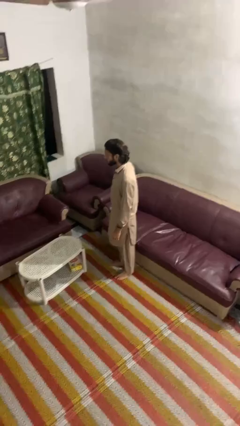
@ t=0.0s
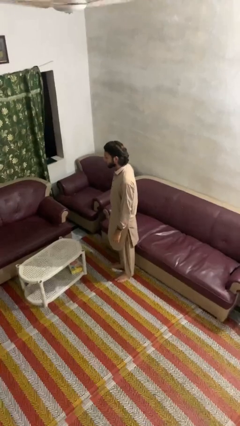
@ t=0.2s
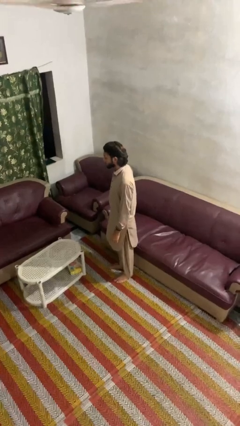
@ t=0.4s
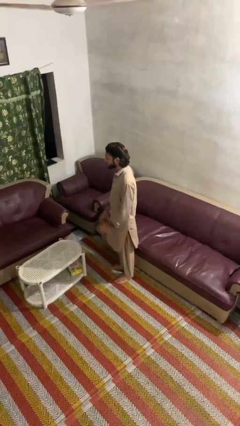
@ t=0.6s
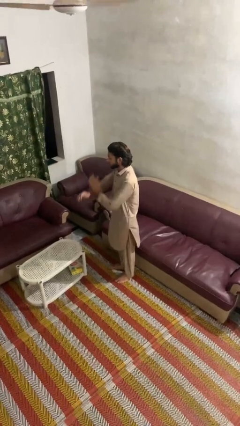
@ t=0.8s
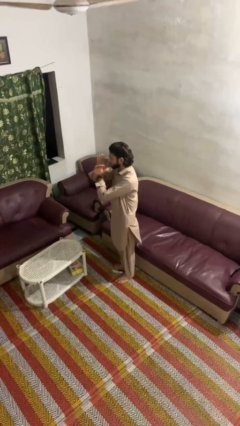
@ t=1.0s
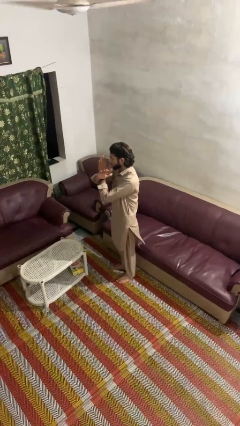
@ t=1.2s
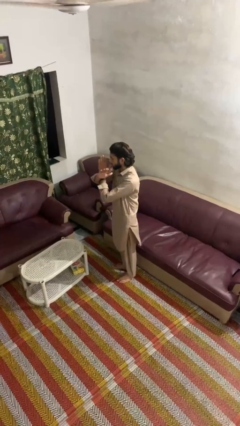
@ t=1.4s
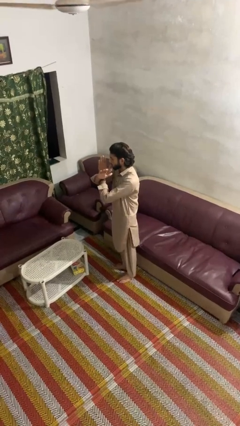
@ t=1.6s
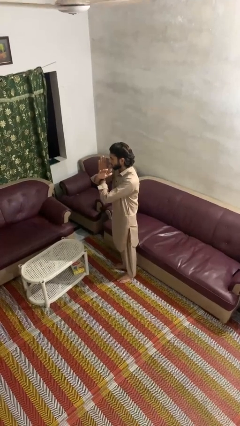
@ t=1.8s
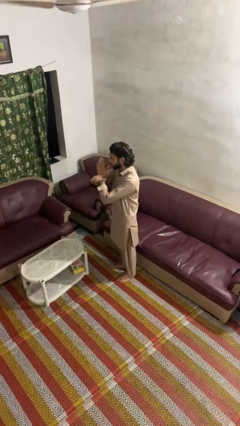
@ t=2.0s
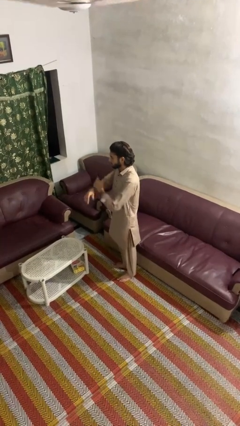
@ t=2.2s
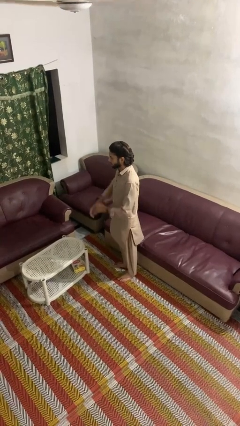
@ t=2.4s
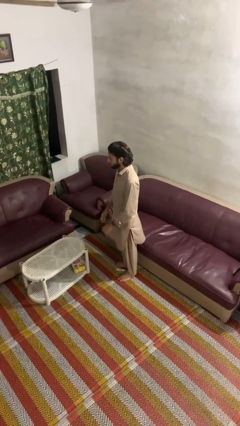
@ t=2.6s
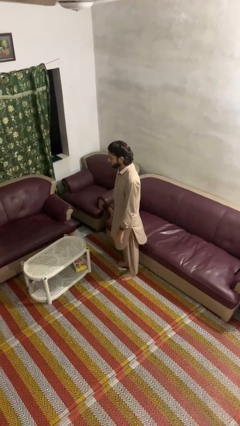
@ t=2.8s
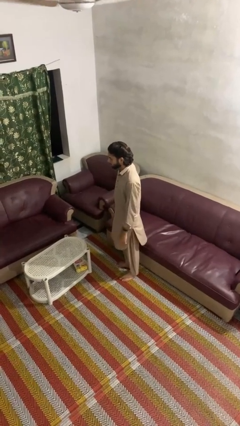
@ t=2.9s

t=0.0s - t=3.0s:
person gestures arms x

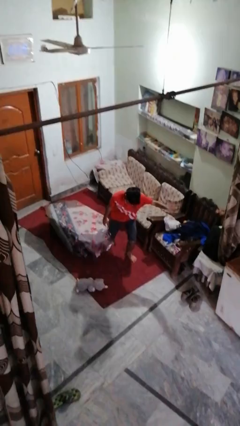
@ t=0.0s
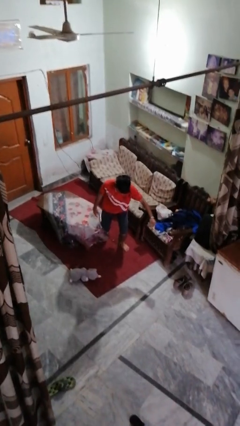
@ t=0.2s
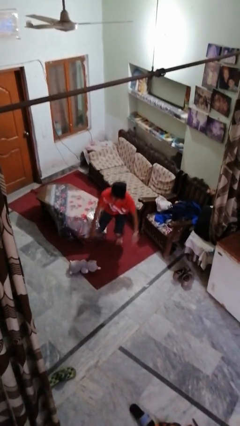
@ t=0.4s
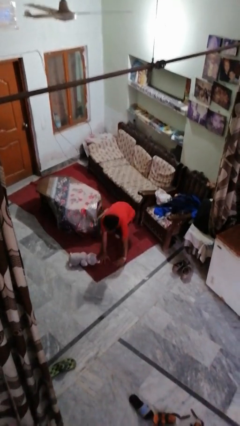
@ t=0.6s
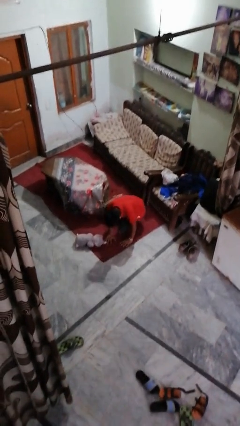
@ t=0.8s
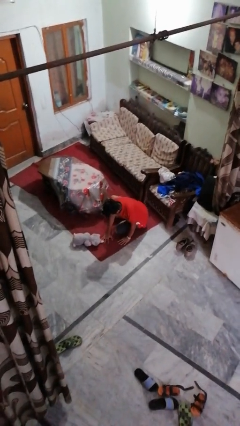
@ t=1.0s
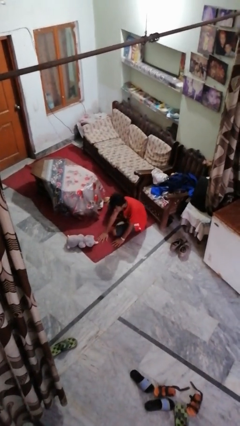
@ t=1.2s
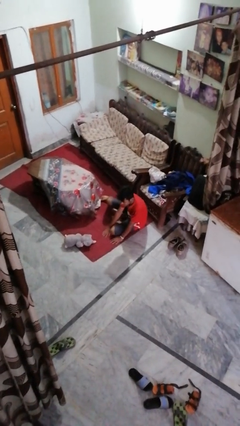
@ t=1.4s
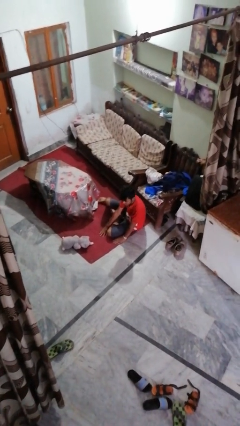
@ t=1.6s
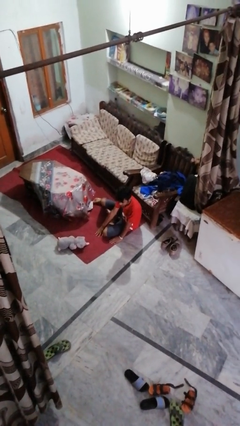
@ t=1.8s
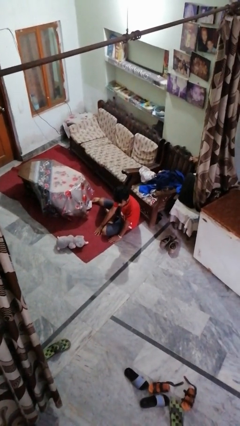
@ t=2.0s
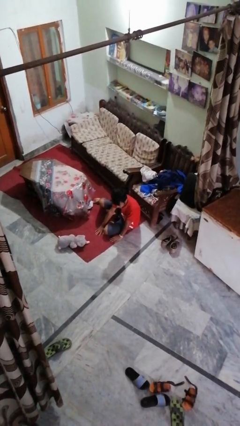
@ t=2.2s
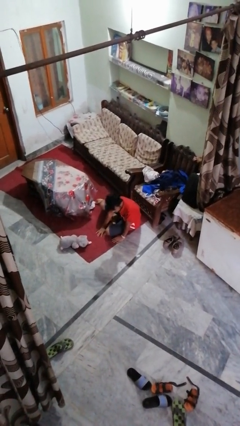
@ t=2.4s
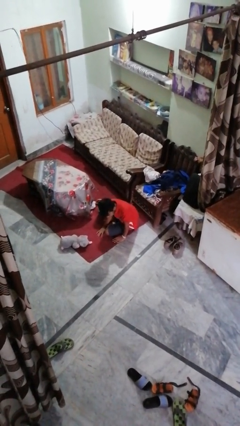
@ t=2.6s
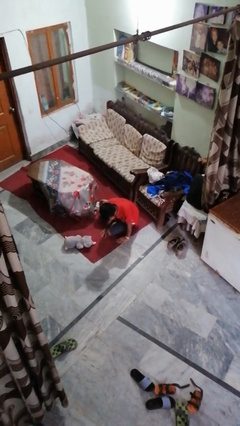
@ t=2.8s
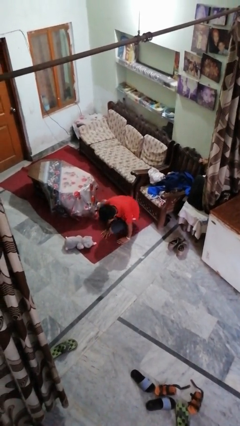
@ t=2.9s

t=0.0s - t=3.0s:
person lies down on floor

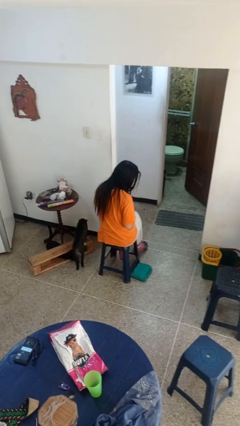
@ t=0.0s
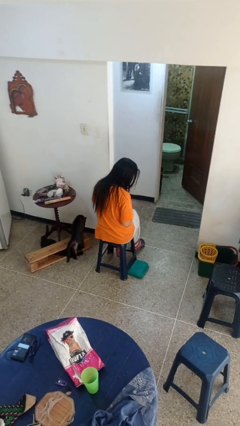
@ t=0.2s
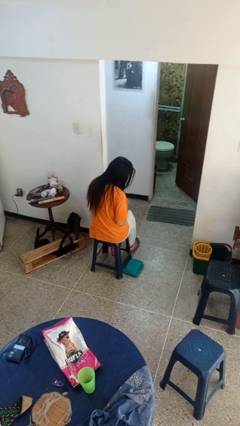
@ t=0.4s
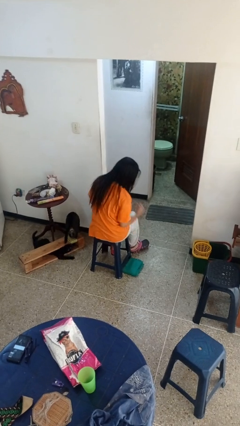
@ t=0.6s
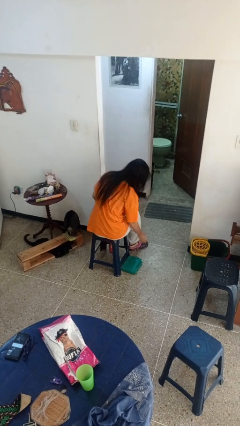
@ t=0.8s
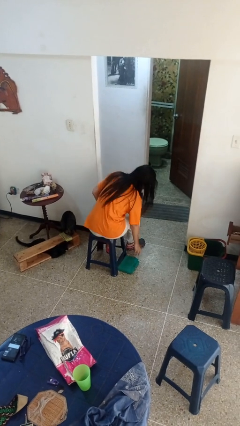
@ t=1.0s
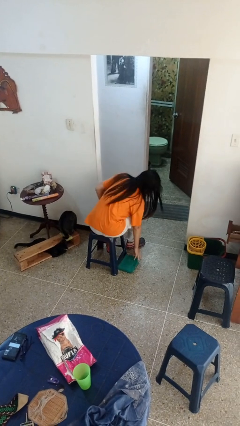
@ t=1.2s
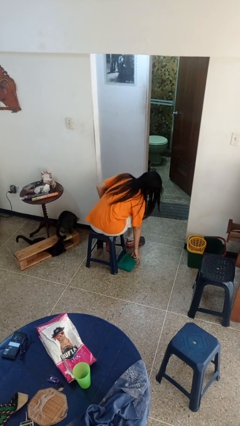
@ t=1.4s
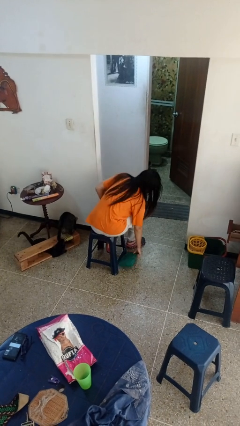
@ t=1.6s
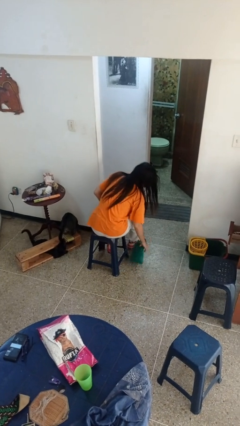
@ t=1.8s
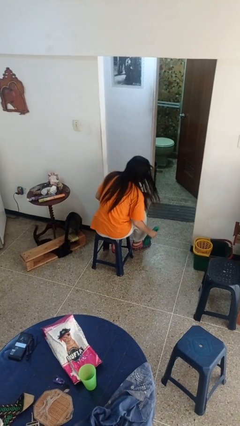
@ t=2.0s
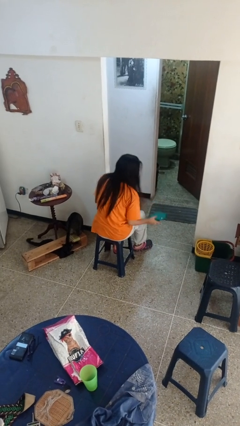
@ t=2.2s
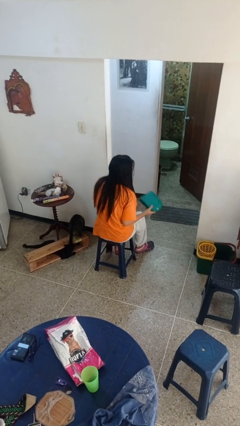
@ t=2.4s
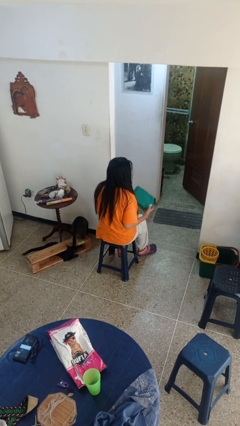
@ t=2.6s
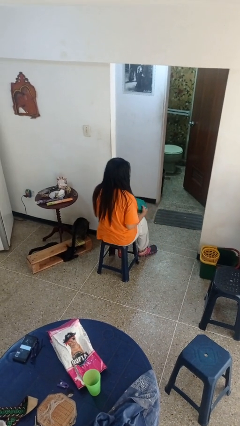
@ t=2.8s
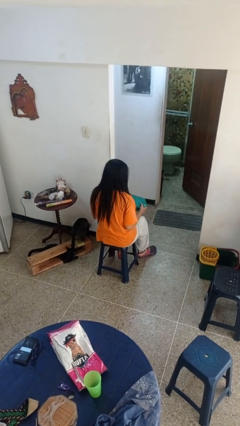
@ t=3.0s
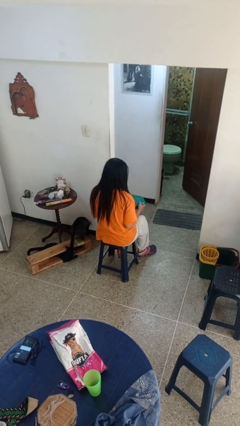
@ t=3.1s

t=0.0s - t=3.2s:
person picks up object from floor

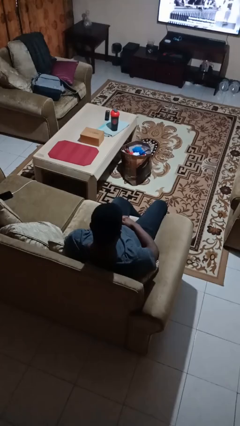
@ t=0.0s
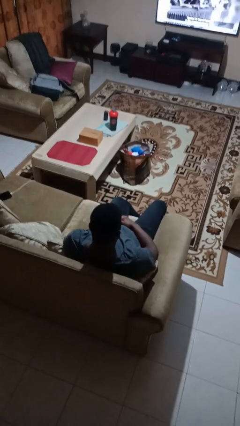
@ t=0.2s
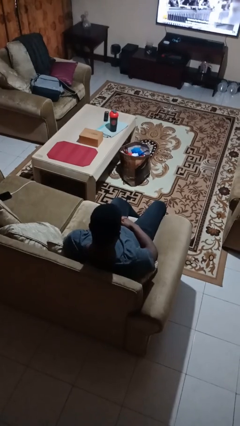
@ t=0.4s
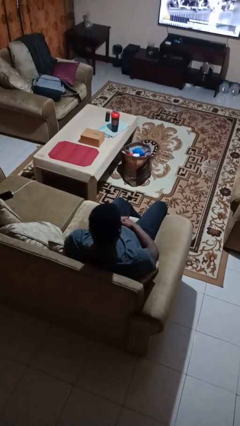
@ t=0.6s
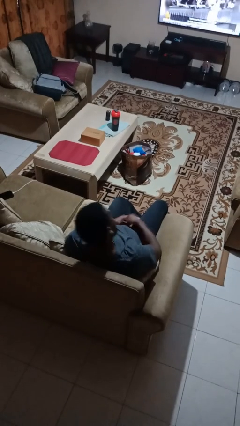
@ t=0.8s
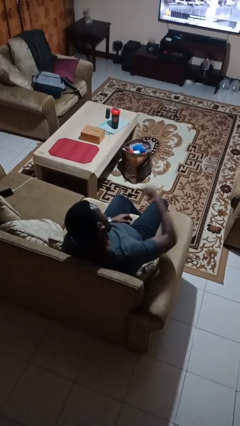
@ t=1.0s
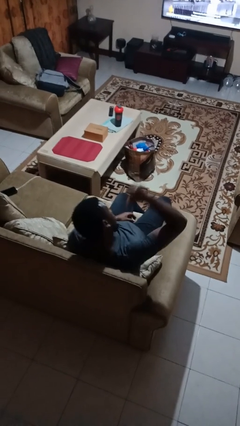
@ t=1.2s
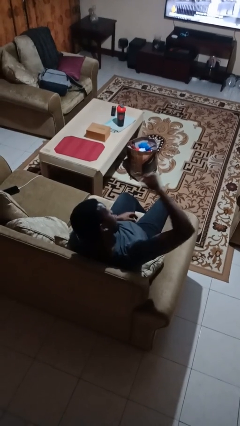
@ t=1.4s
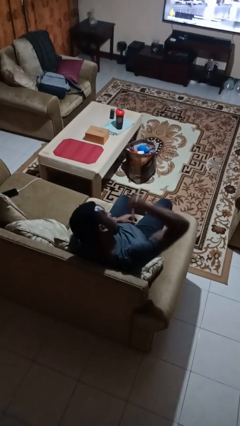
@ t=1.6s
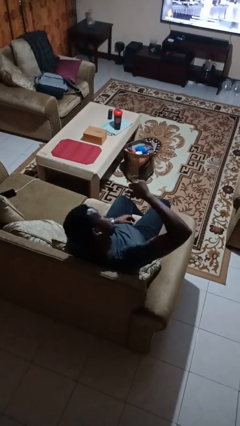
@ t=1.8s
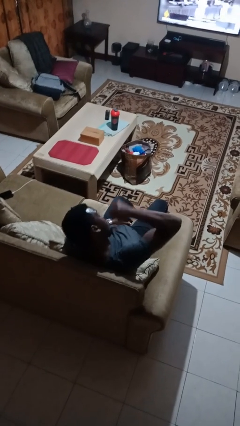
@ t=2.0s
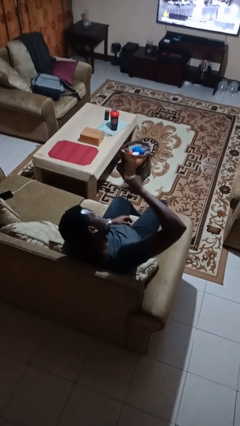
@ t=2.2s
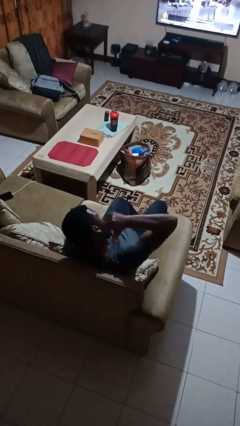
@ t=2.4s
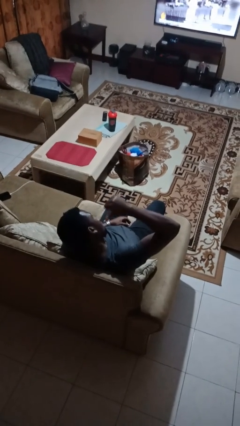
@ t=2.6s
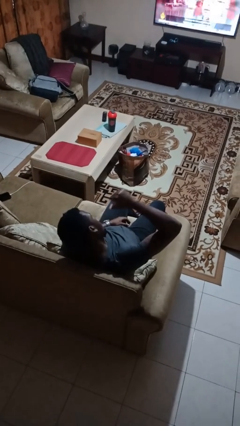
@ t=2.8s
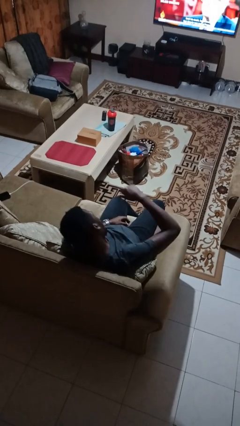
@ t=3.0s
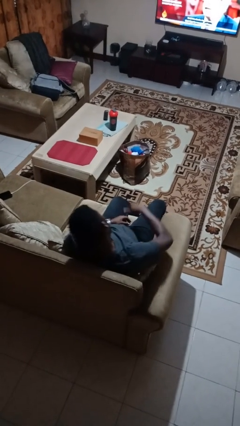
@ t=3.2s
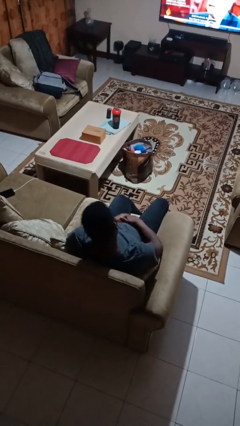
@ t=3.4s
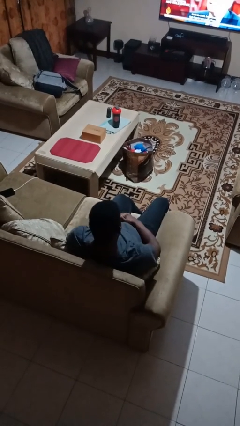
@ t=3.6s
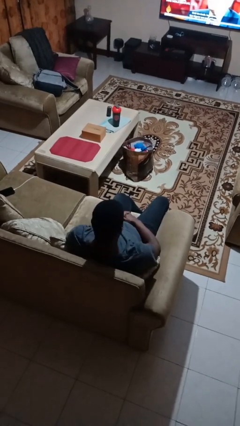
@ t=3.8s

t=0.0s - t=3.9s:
person gestures behind me

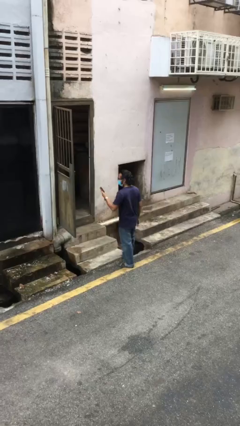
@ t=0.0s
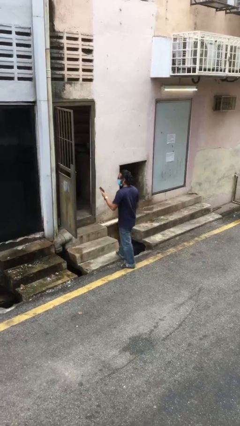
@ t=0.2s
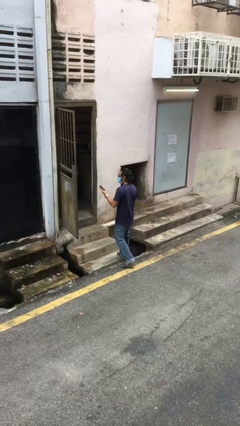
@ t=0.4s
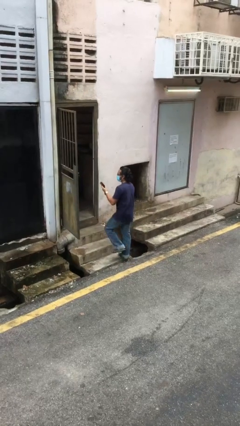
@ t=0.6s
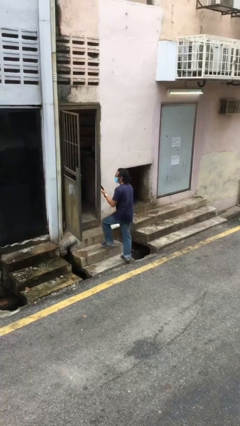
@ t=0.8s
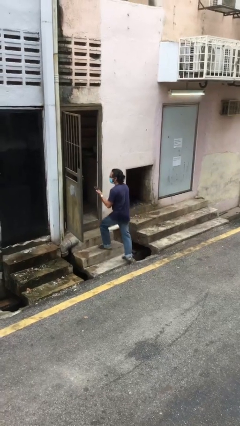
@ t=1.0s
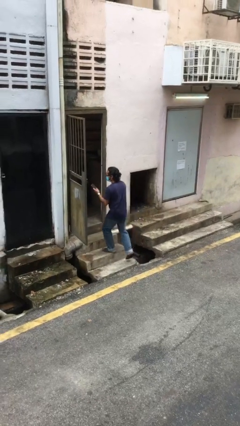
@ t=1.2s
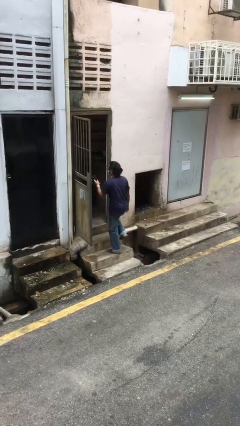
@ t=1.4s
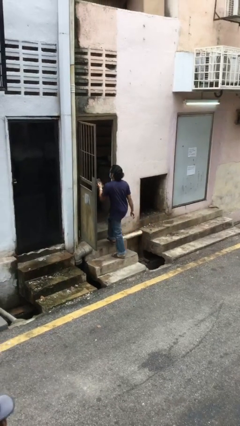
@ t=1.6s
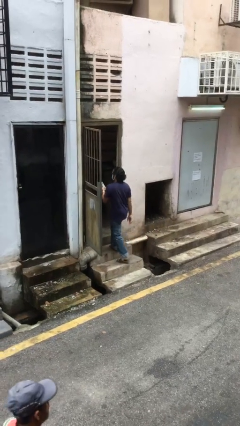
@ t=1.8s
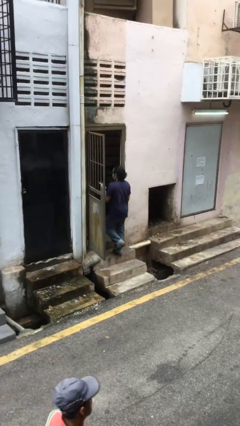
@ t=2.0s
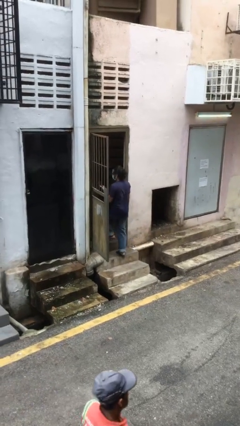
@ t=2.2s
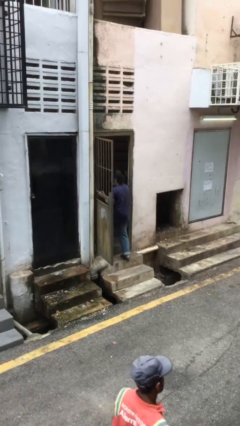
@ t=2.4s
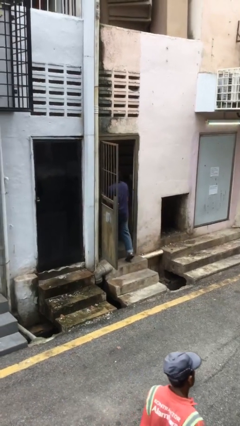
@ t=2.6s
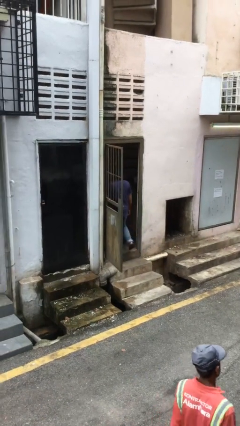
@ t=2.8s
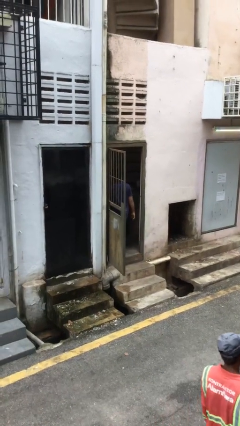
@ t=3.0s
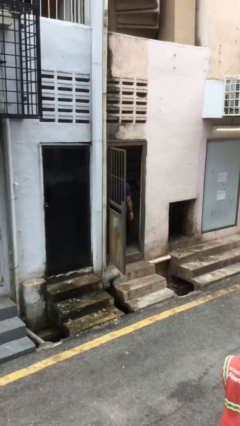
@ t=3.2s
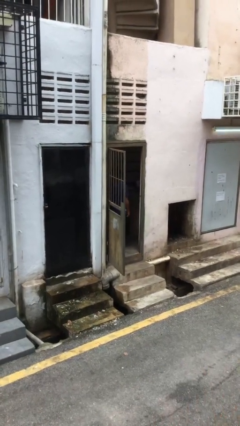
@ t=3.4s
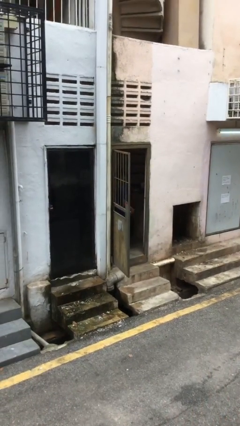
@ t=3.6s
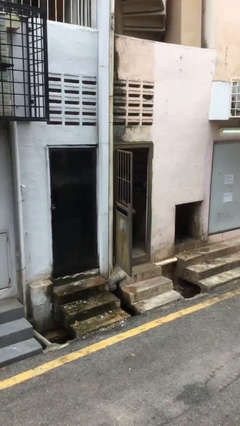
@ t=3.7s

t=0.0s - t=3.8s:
person exits scene through structure

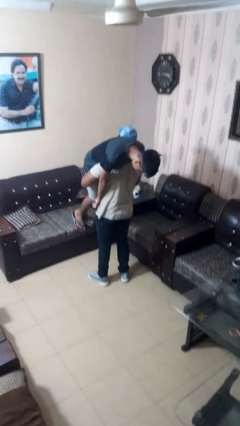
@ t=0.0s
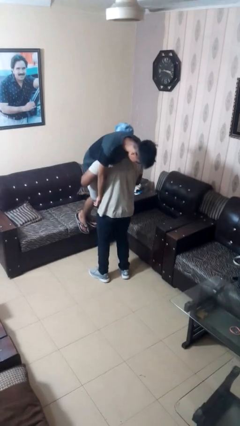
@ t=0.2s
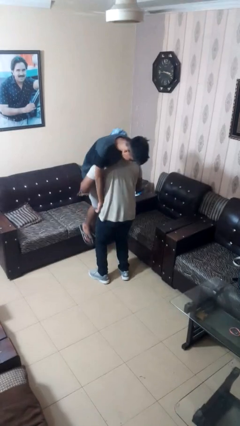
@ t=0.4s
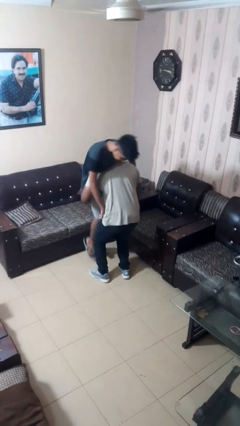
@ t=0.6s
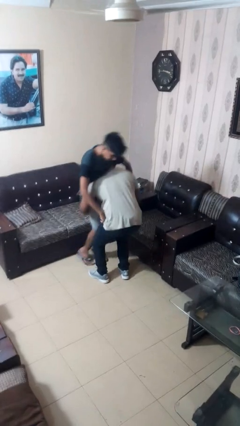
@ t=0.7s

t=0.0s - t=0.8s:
person puts down person
